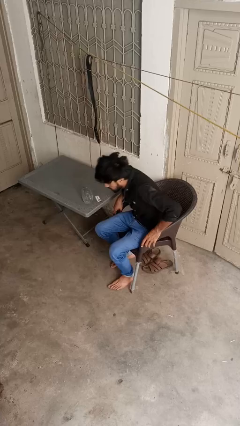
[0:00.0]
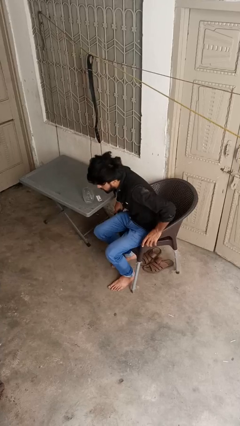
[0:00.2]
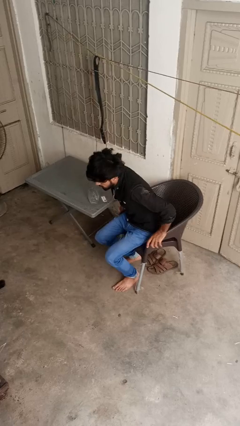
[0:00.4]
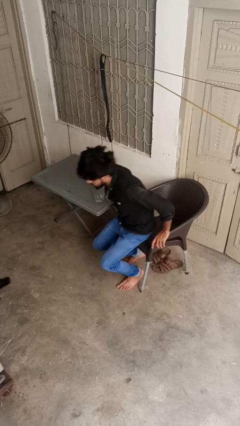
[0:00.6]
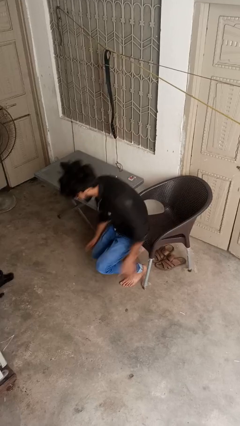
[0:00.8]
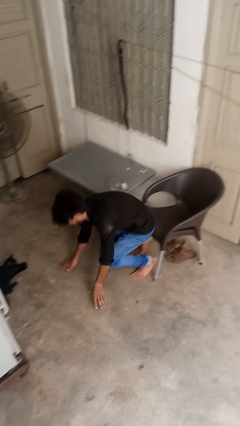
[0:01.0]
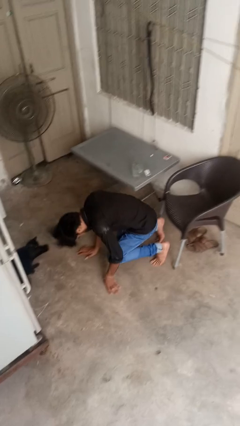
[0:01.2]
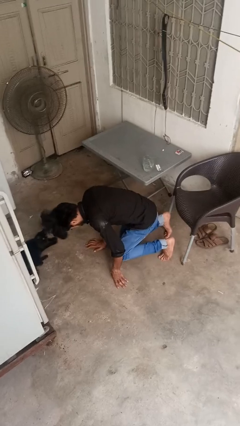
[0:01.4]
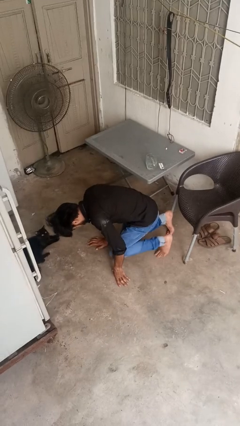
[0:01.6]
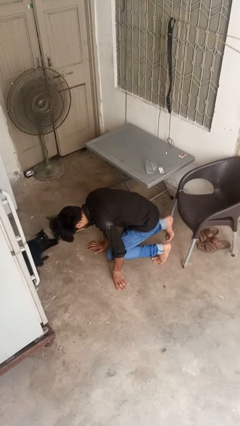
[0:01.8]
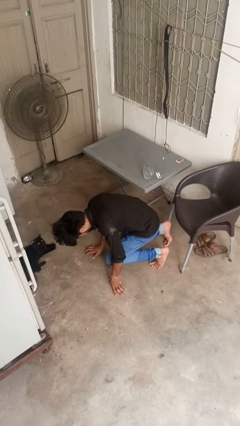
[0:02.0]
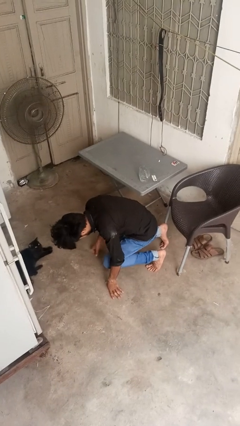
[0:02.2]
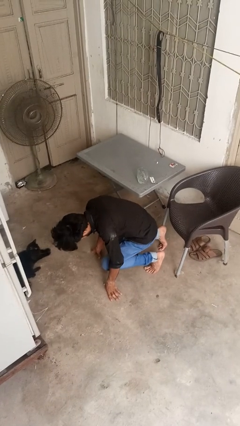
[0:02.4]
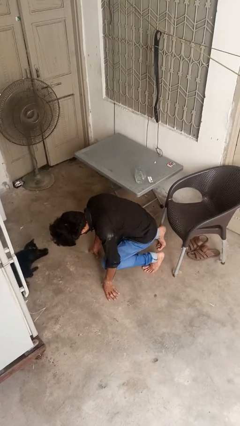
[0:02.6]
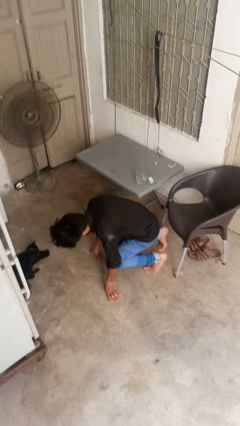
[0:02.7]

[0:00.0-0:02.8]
person falls from chair

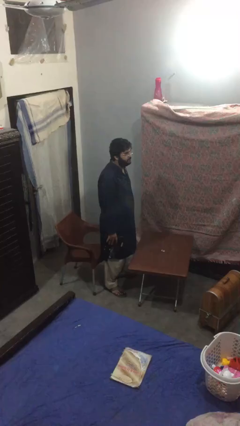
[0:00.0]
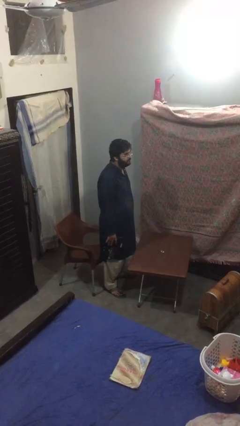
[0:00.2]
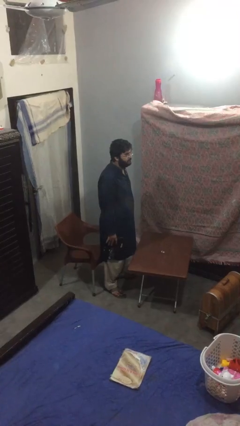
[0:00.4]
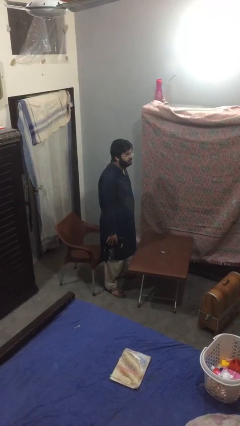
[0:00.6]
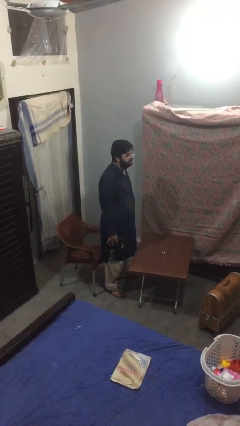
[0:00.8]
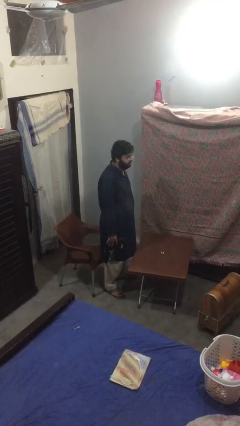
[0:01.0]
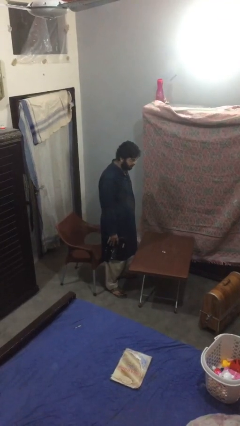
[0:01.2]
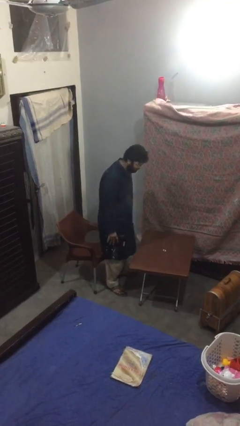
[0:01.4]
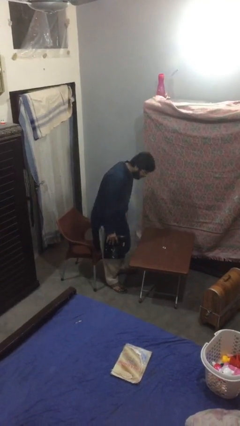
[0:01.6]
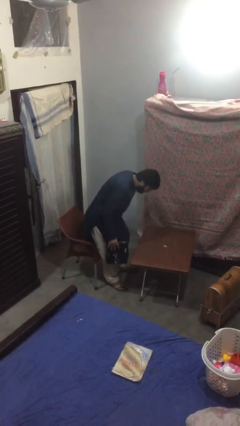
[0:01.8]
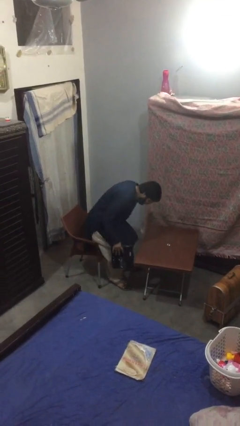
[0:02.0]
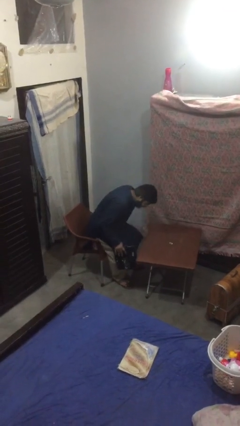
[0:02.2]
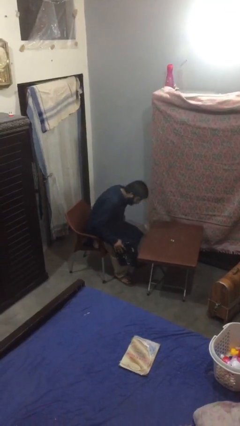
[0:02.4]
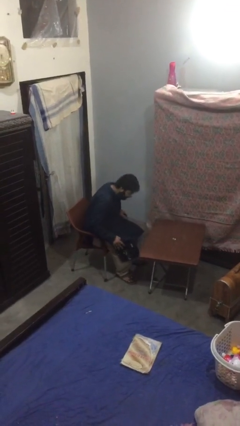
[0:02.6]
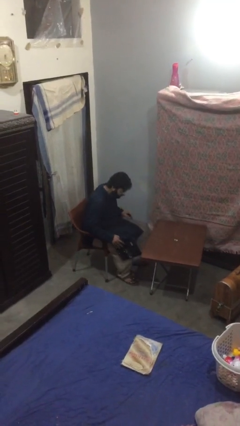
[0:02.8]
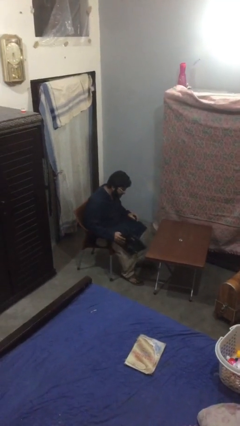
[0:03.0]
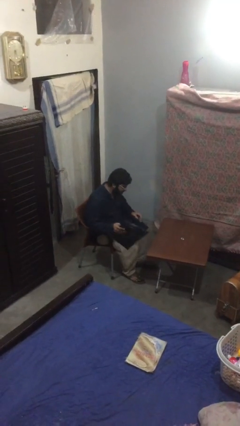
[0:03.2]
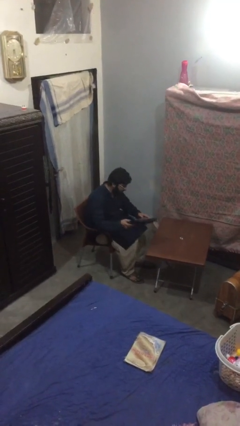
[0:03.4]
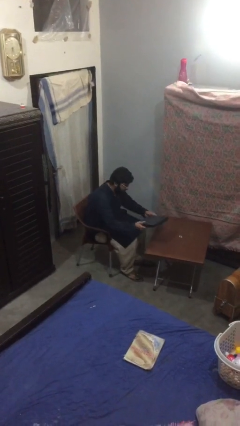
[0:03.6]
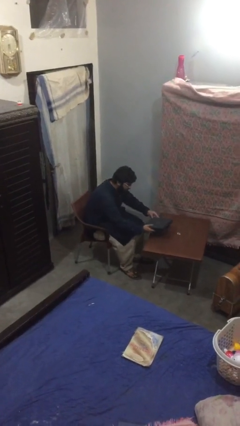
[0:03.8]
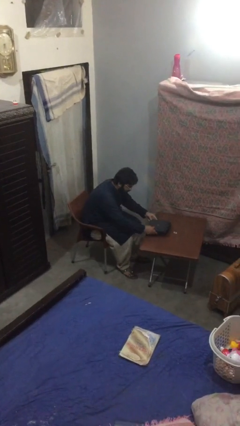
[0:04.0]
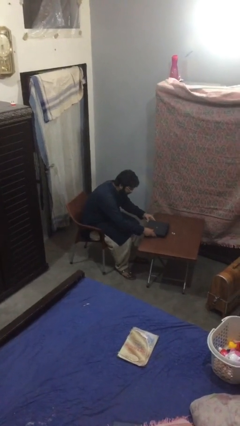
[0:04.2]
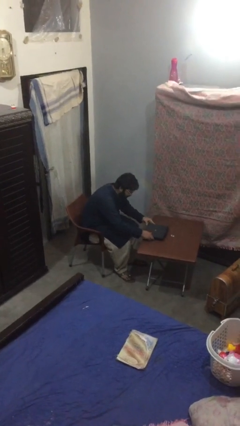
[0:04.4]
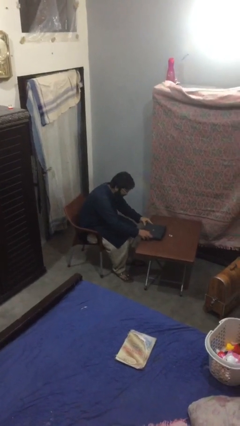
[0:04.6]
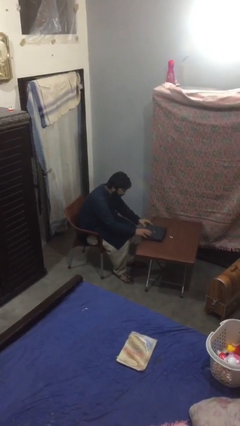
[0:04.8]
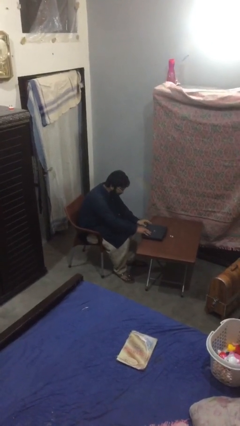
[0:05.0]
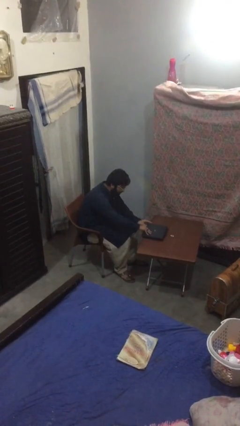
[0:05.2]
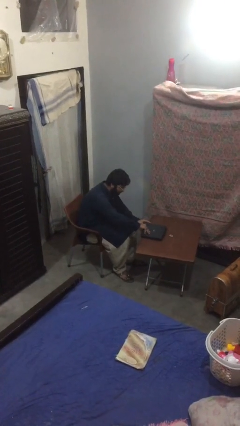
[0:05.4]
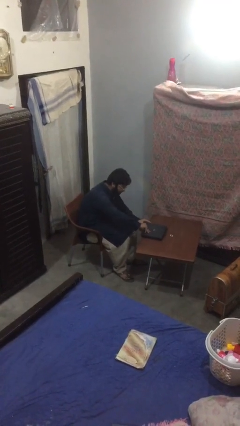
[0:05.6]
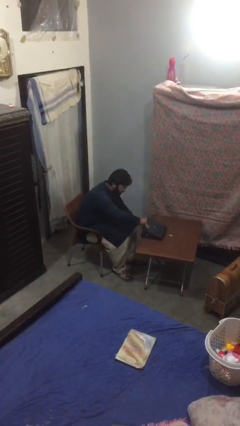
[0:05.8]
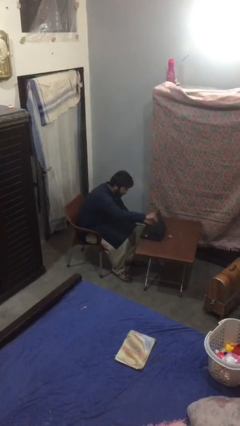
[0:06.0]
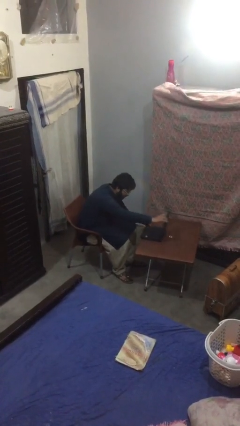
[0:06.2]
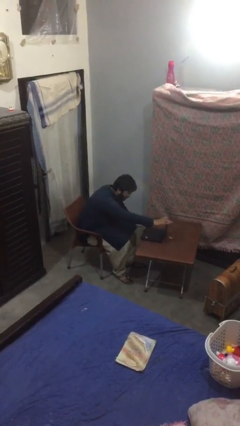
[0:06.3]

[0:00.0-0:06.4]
person sits down

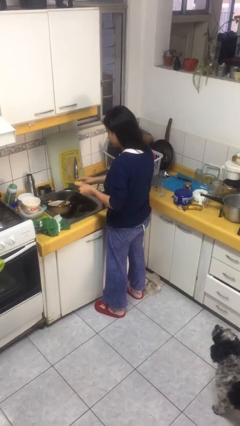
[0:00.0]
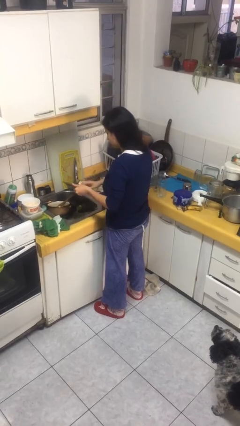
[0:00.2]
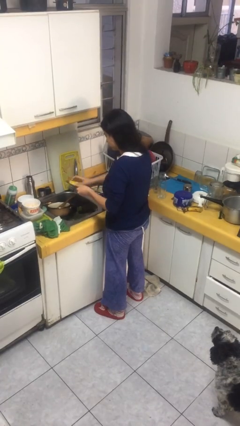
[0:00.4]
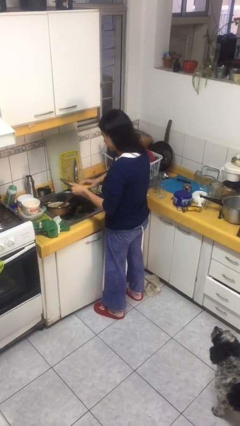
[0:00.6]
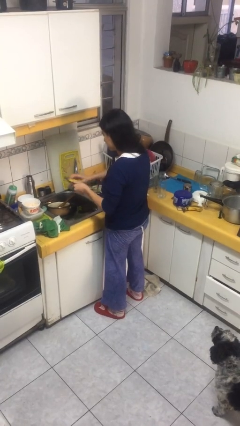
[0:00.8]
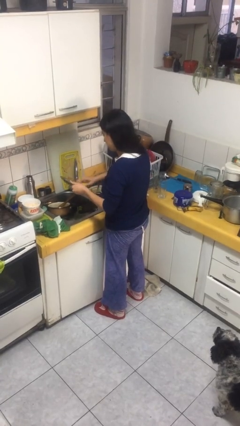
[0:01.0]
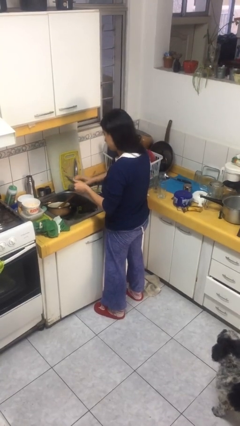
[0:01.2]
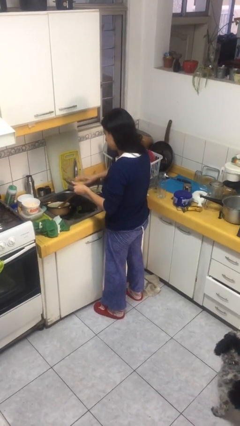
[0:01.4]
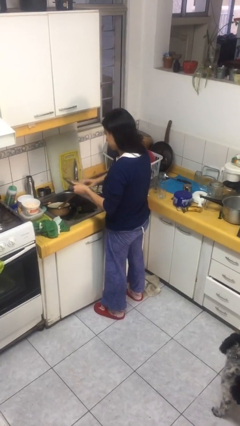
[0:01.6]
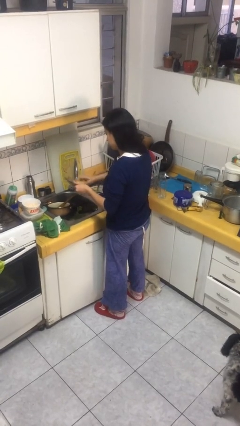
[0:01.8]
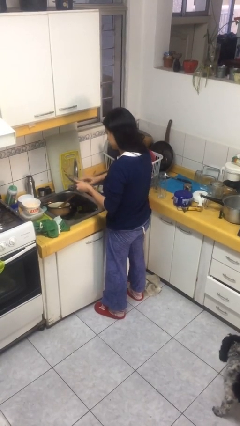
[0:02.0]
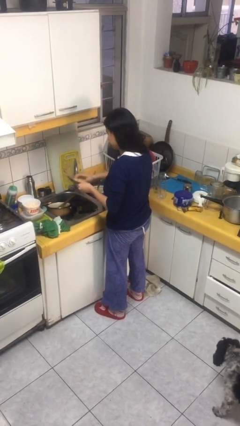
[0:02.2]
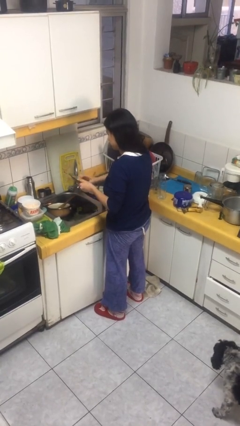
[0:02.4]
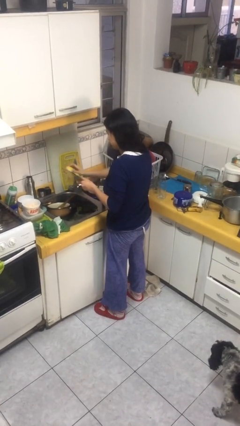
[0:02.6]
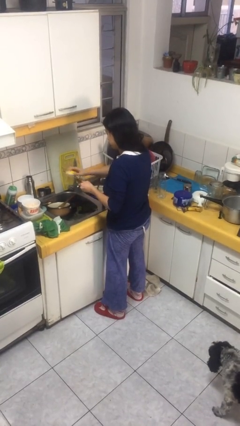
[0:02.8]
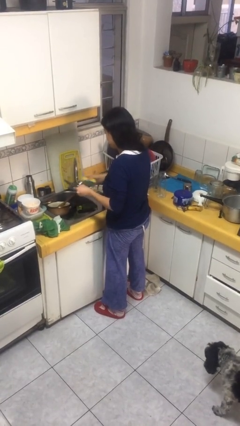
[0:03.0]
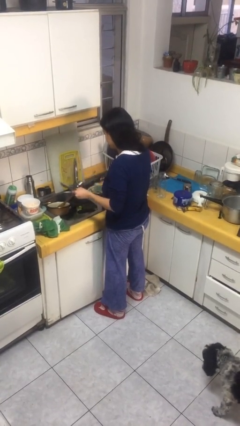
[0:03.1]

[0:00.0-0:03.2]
person washes dish

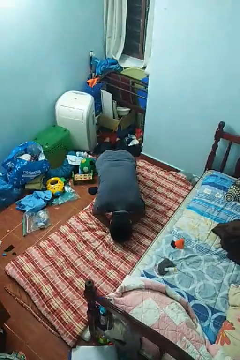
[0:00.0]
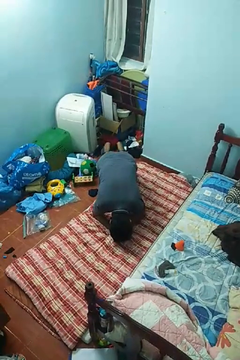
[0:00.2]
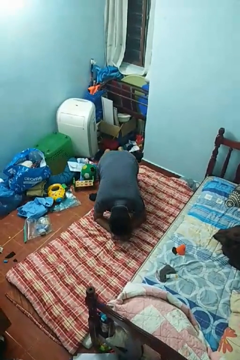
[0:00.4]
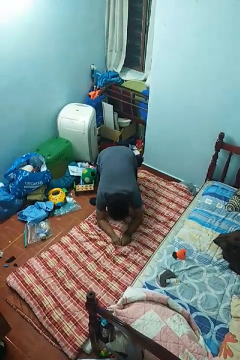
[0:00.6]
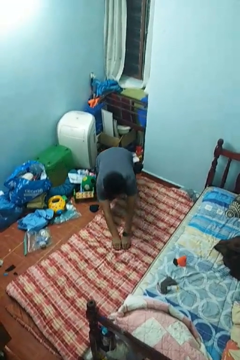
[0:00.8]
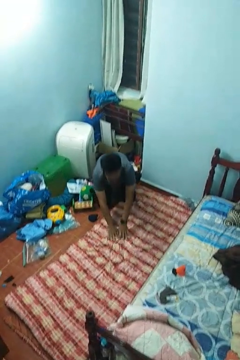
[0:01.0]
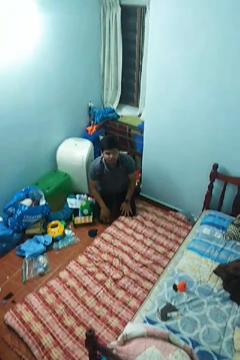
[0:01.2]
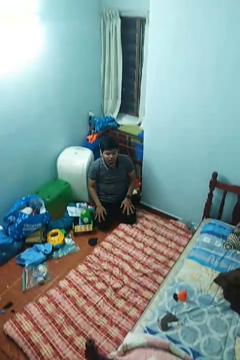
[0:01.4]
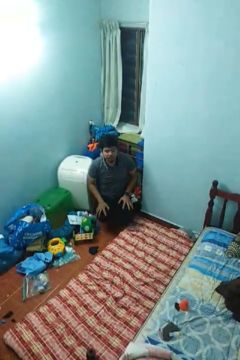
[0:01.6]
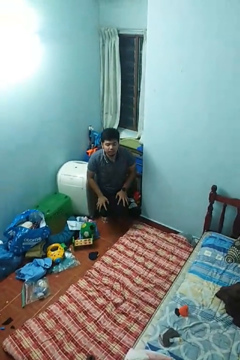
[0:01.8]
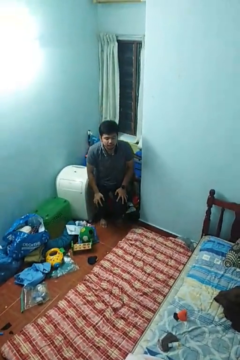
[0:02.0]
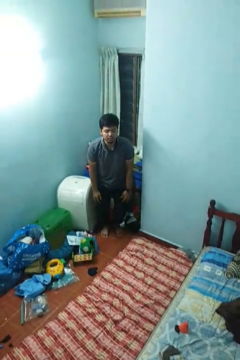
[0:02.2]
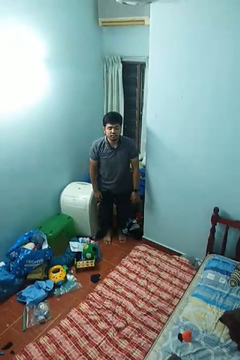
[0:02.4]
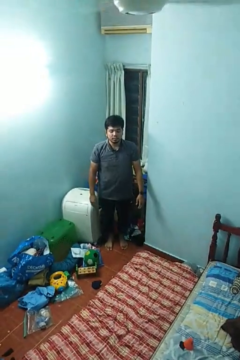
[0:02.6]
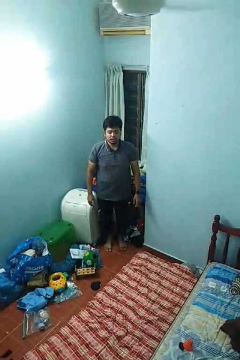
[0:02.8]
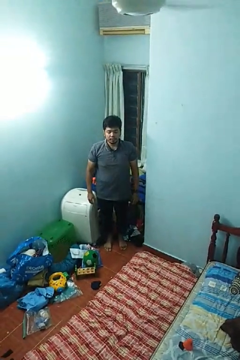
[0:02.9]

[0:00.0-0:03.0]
person stands up from floor

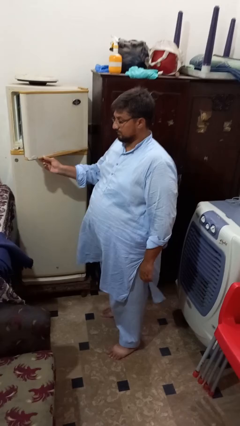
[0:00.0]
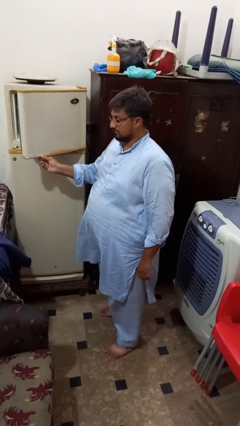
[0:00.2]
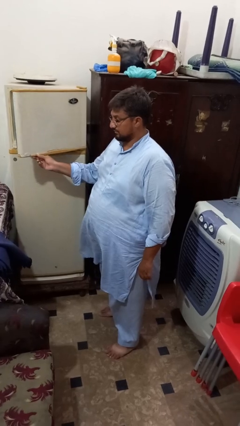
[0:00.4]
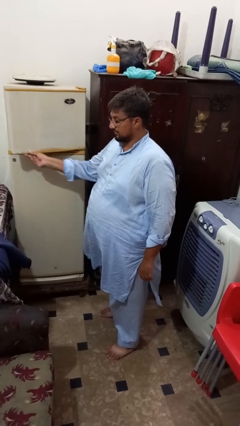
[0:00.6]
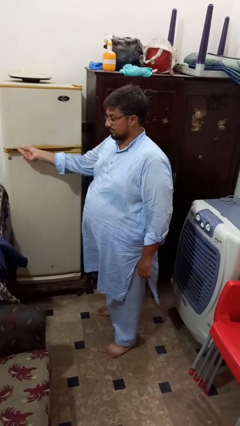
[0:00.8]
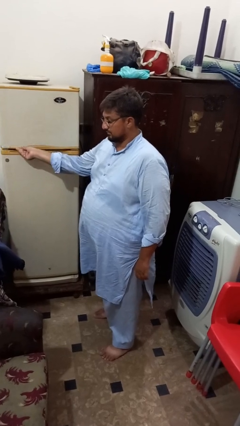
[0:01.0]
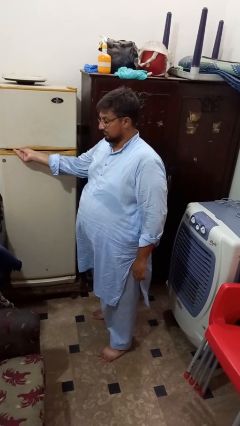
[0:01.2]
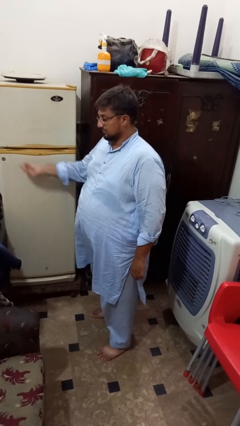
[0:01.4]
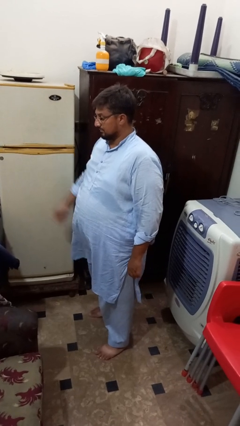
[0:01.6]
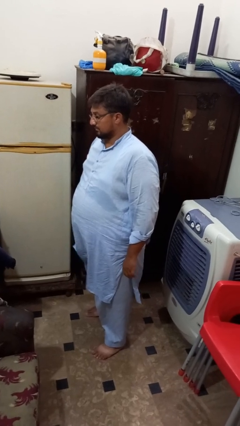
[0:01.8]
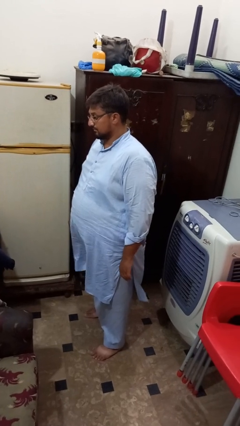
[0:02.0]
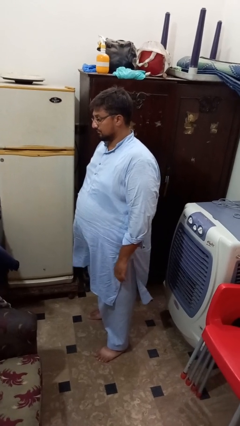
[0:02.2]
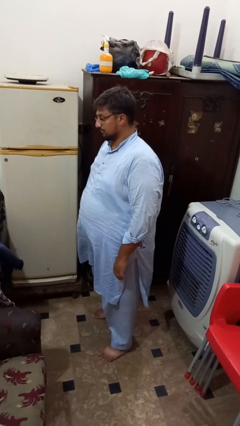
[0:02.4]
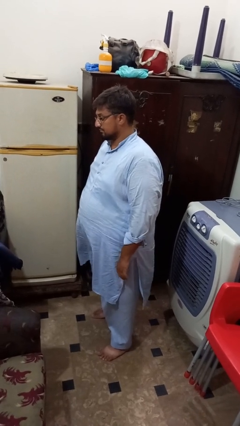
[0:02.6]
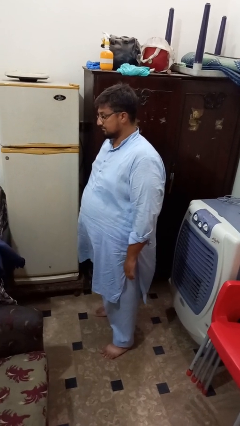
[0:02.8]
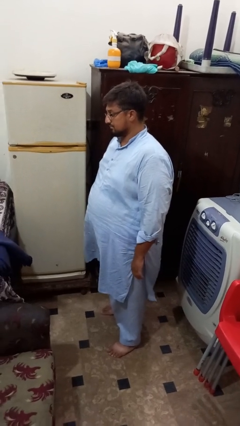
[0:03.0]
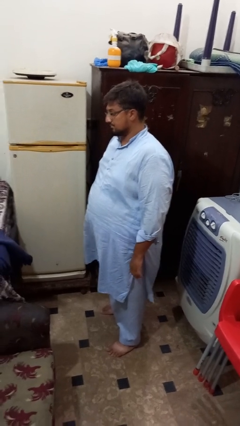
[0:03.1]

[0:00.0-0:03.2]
person closes refrigerator
